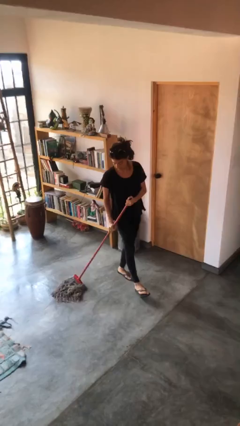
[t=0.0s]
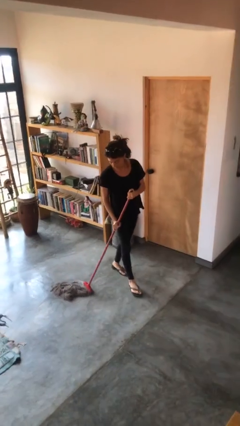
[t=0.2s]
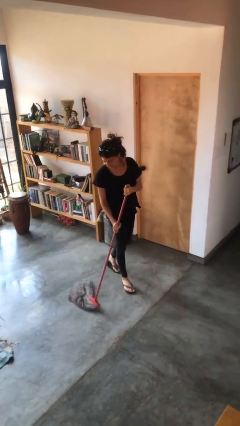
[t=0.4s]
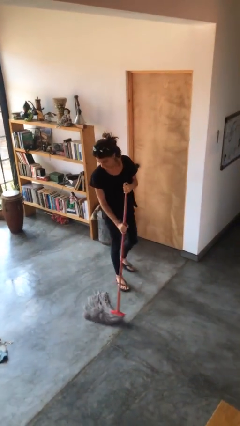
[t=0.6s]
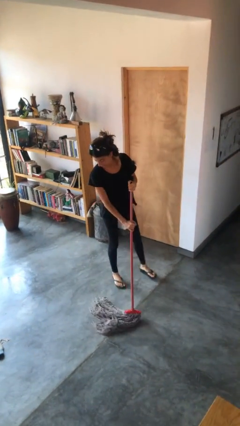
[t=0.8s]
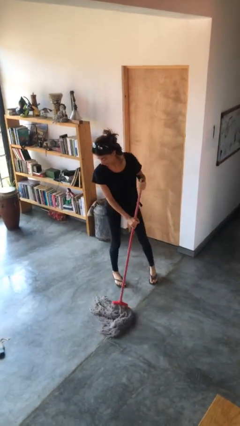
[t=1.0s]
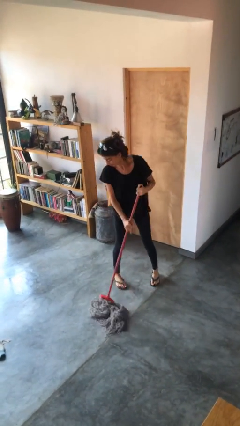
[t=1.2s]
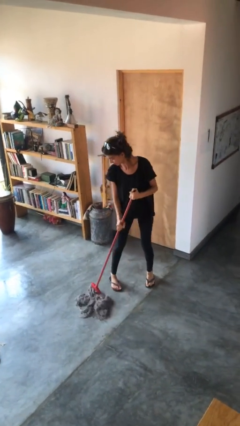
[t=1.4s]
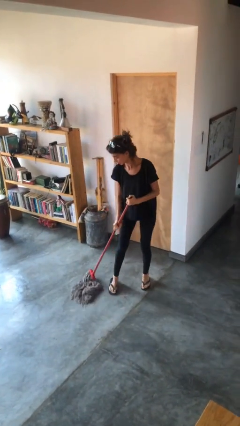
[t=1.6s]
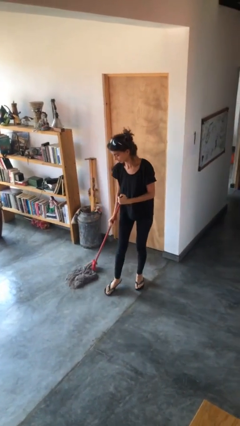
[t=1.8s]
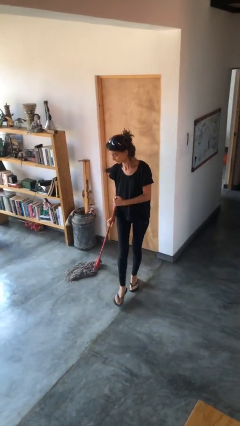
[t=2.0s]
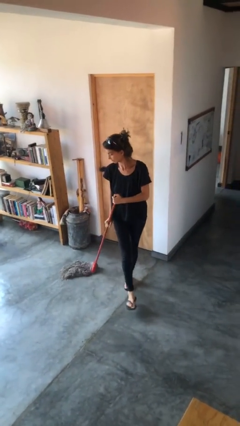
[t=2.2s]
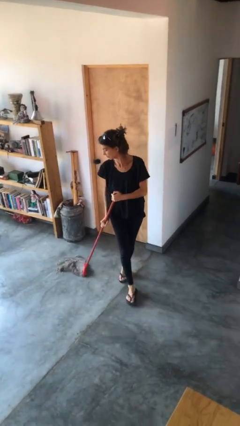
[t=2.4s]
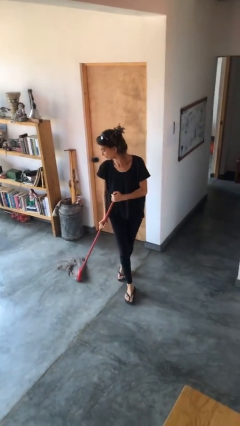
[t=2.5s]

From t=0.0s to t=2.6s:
person mops

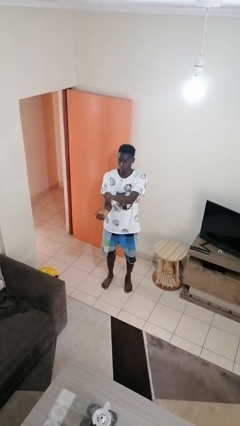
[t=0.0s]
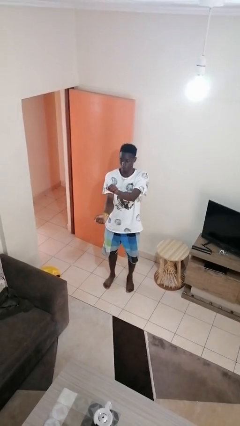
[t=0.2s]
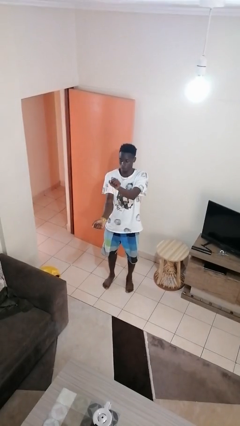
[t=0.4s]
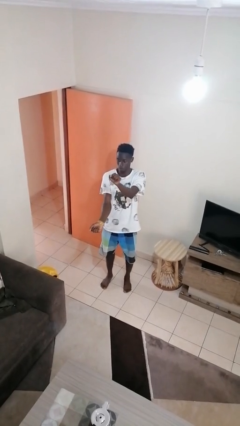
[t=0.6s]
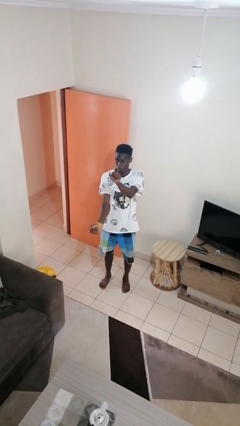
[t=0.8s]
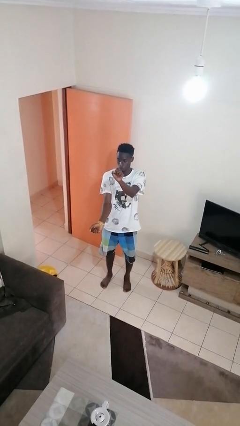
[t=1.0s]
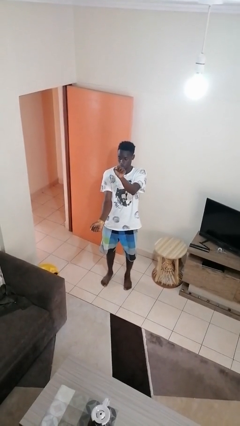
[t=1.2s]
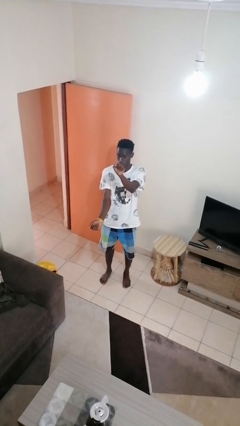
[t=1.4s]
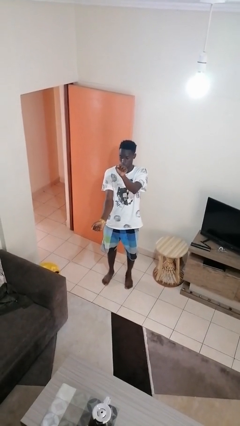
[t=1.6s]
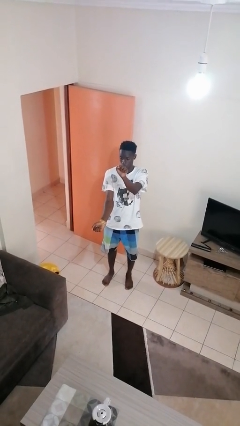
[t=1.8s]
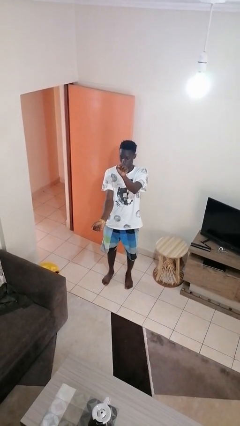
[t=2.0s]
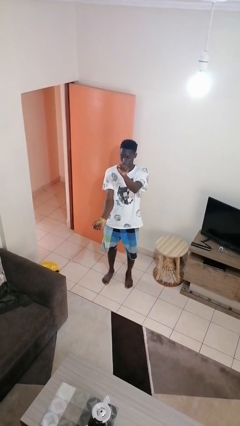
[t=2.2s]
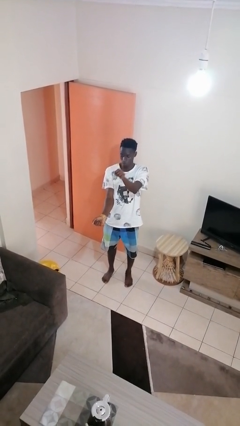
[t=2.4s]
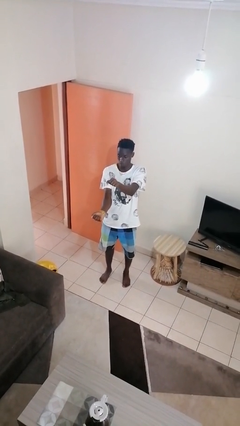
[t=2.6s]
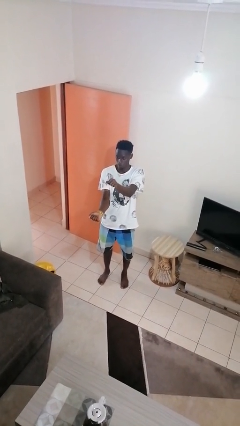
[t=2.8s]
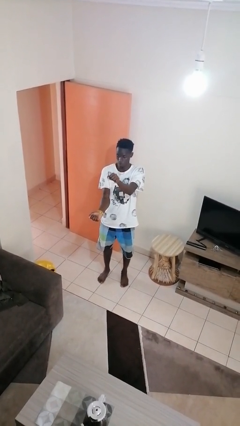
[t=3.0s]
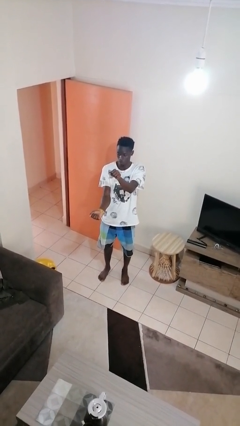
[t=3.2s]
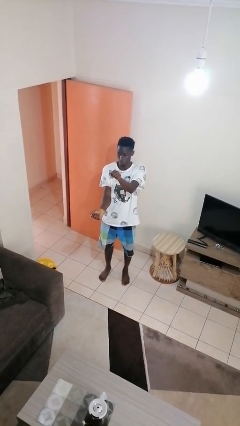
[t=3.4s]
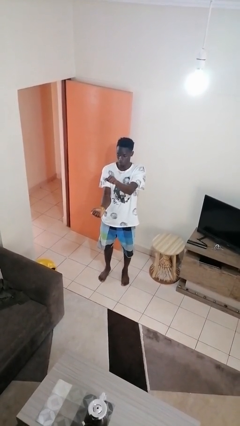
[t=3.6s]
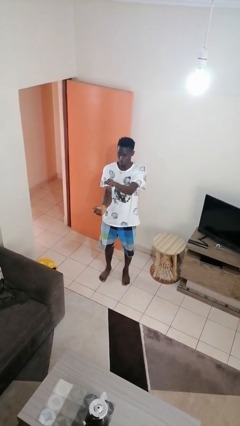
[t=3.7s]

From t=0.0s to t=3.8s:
person gestures zoom in

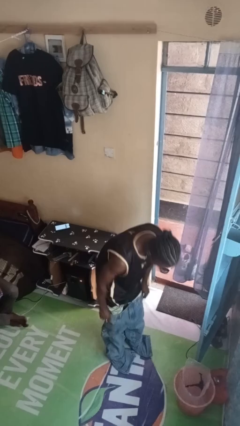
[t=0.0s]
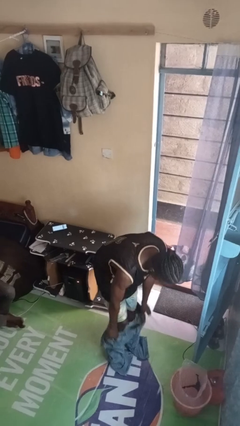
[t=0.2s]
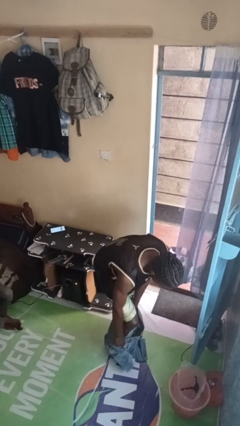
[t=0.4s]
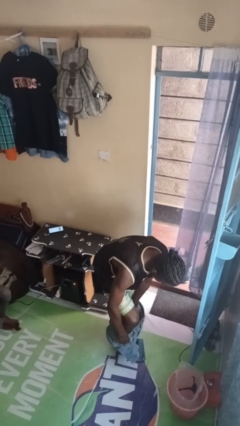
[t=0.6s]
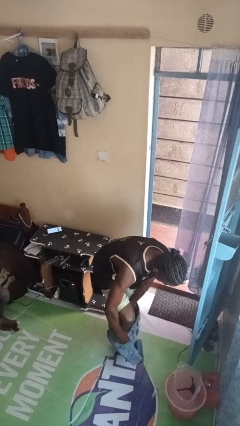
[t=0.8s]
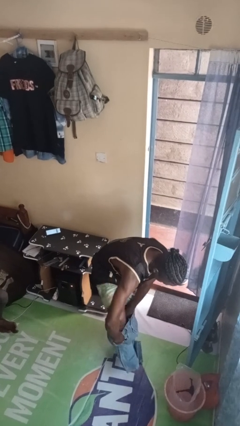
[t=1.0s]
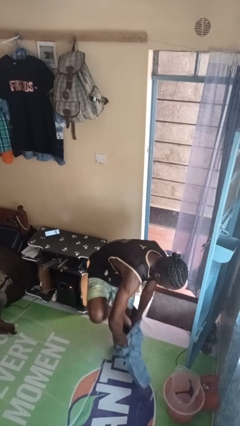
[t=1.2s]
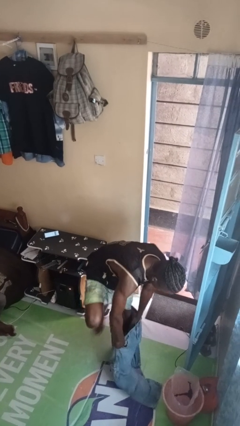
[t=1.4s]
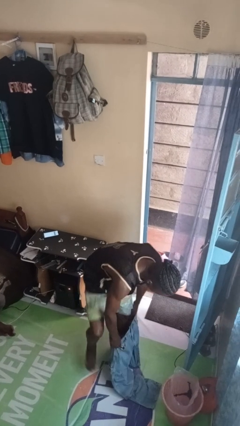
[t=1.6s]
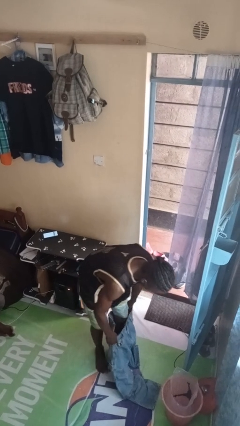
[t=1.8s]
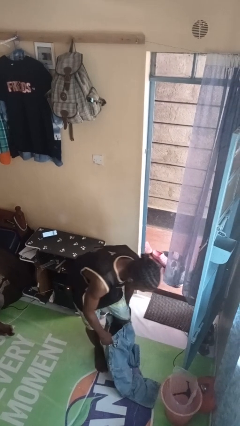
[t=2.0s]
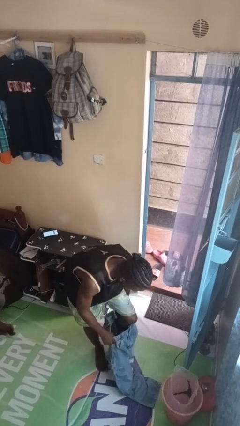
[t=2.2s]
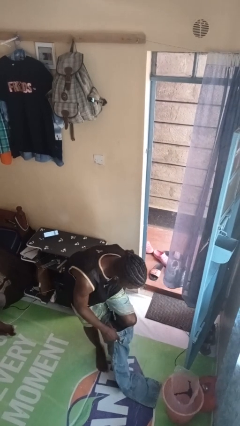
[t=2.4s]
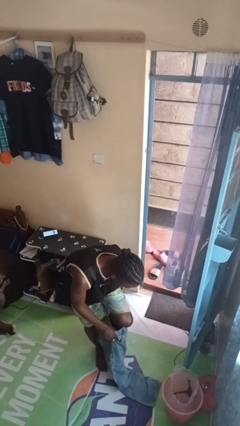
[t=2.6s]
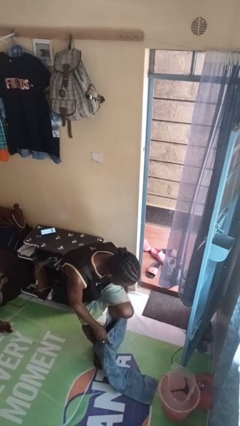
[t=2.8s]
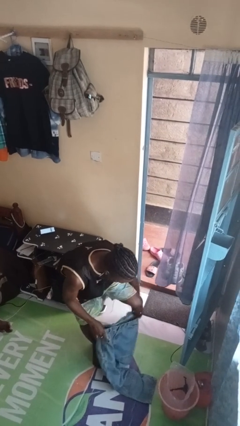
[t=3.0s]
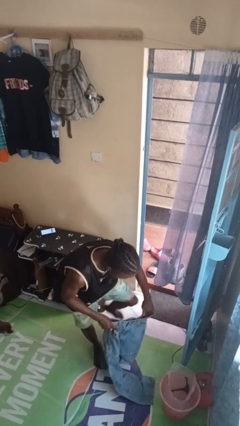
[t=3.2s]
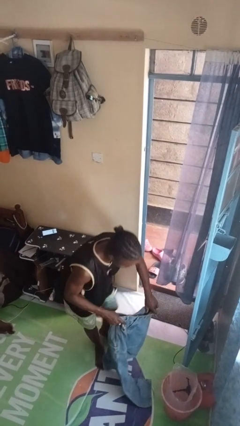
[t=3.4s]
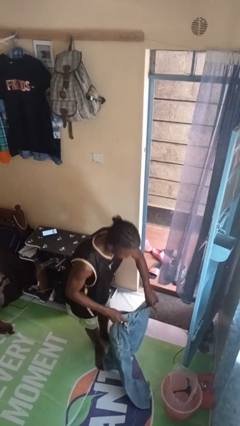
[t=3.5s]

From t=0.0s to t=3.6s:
person takes off pants

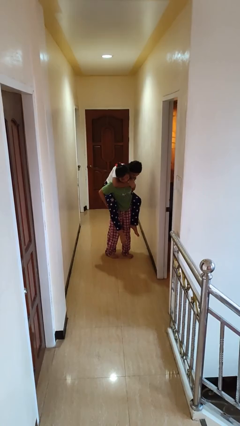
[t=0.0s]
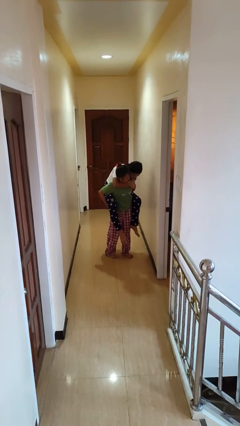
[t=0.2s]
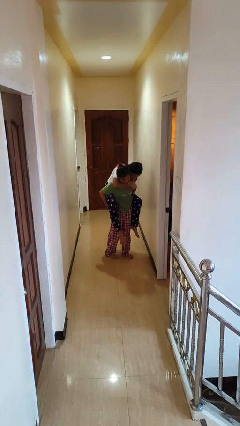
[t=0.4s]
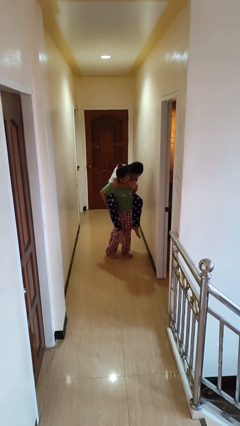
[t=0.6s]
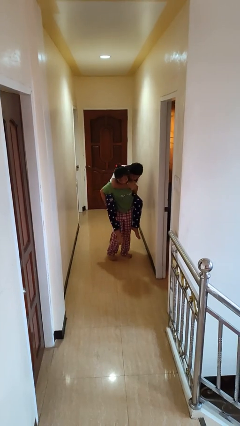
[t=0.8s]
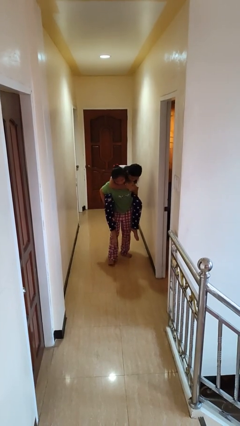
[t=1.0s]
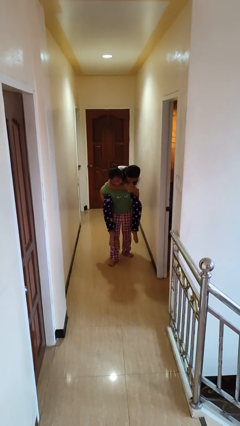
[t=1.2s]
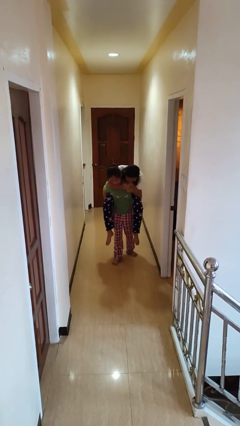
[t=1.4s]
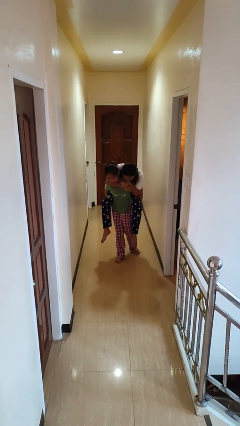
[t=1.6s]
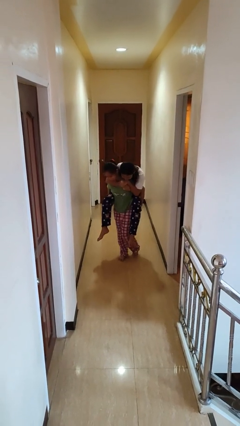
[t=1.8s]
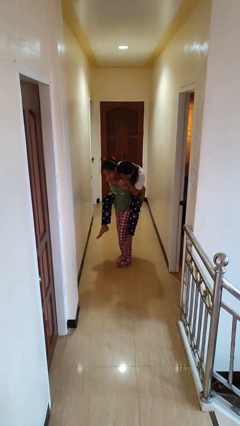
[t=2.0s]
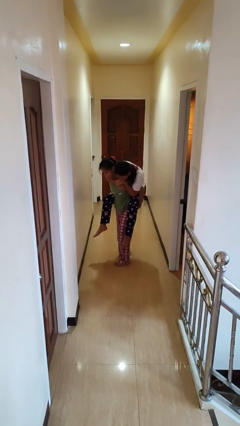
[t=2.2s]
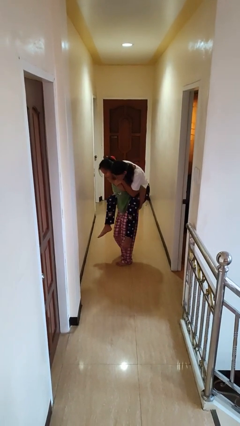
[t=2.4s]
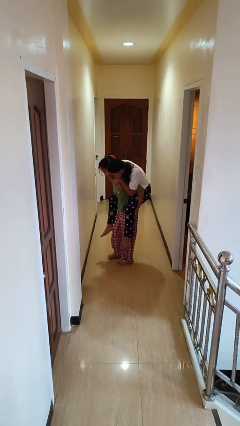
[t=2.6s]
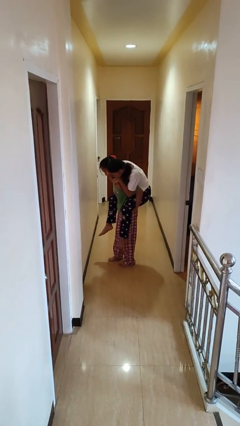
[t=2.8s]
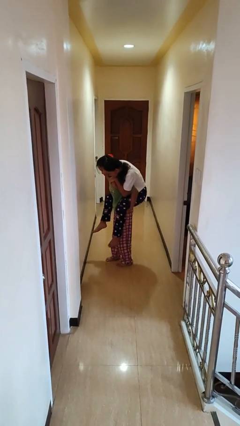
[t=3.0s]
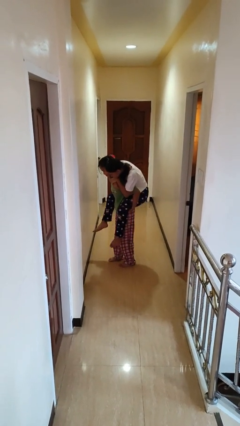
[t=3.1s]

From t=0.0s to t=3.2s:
person carries person on back

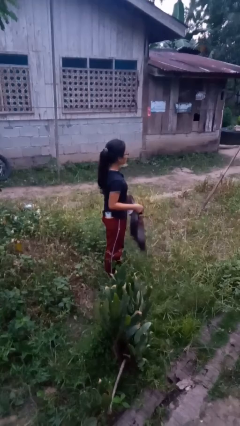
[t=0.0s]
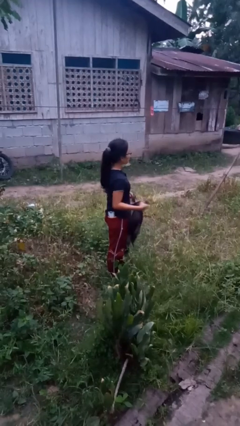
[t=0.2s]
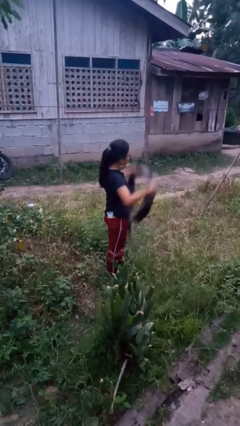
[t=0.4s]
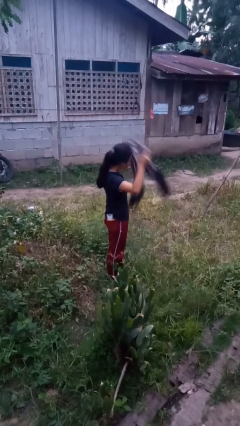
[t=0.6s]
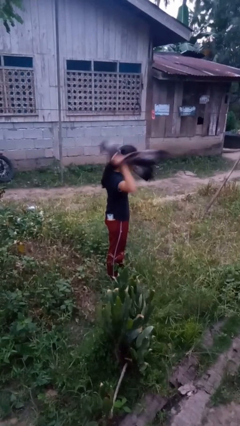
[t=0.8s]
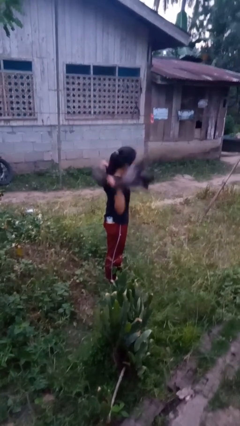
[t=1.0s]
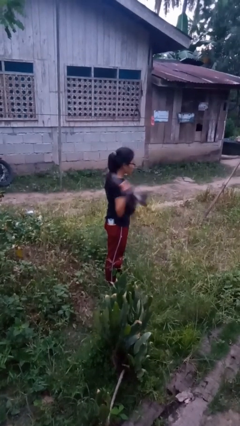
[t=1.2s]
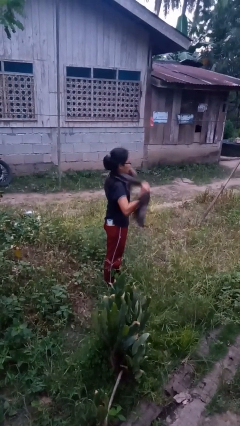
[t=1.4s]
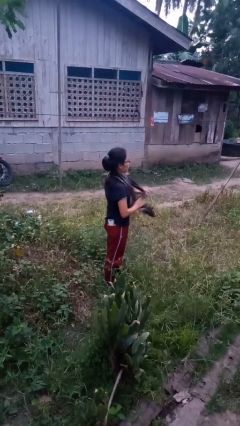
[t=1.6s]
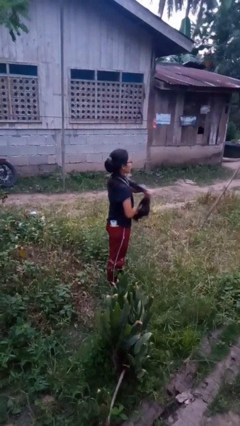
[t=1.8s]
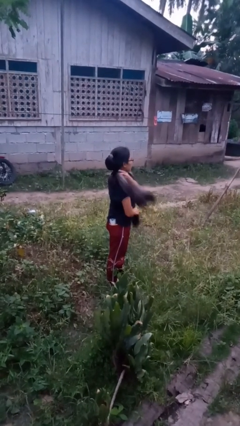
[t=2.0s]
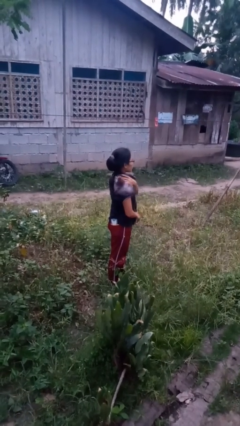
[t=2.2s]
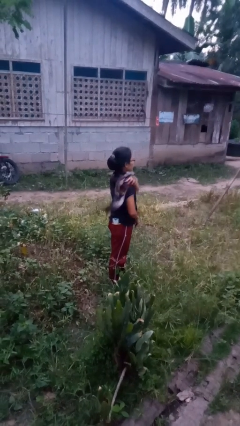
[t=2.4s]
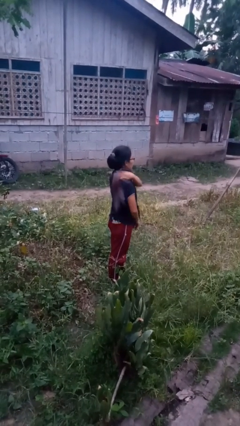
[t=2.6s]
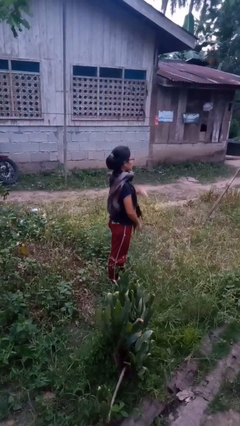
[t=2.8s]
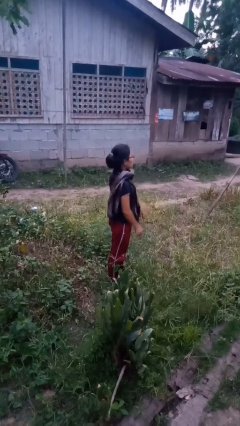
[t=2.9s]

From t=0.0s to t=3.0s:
person puts on scarf

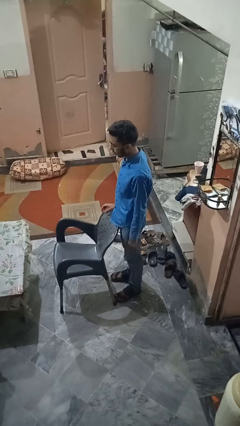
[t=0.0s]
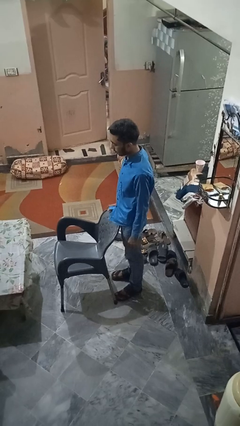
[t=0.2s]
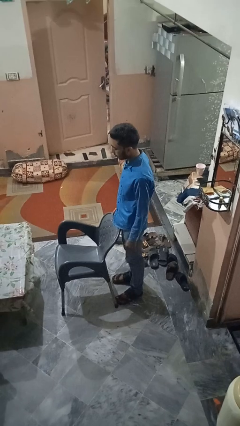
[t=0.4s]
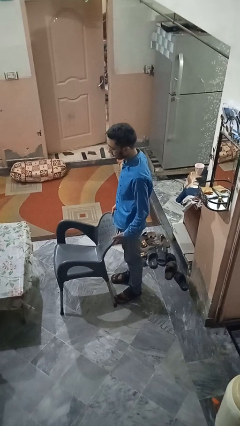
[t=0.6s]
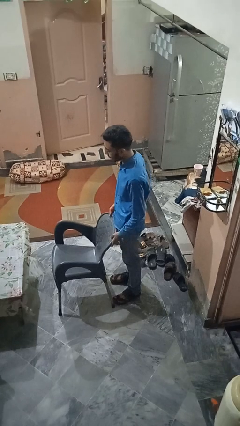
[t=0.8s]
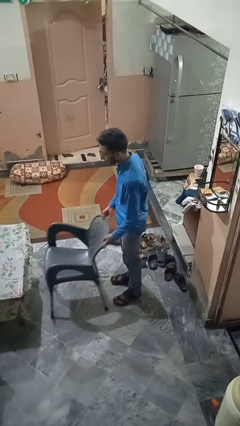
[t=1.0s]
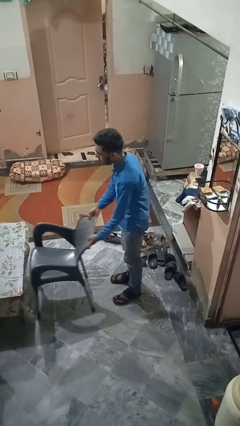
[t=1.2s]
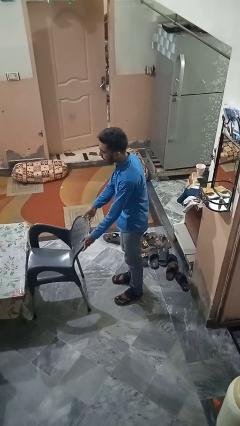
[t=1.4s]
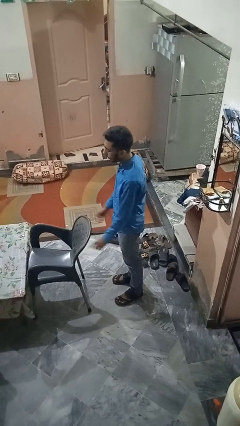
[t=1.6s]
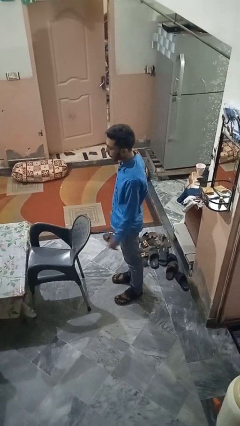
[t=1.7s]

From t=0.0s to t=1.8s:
person pushes in chair
